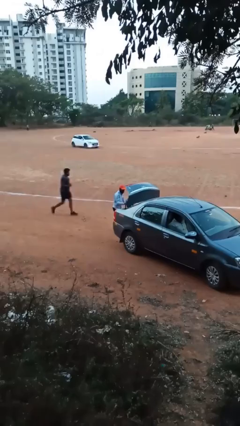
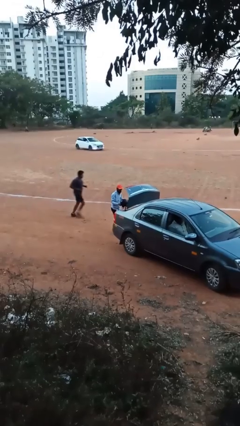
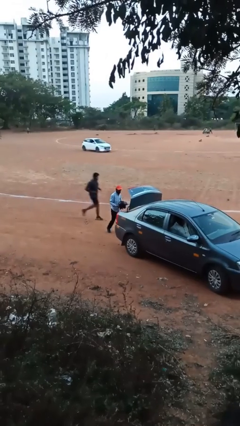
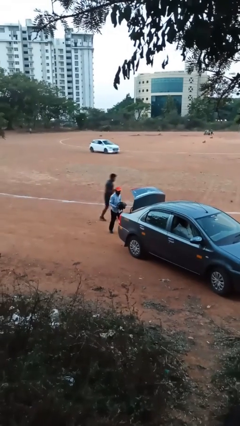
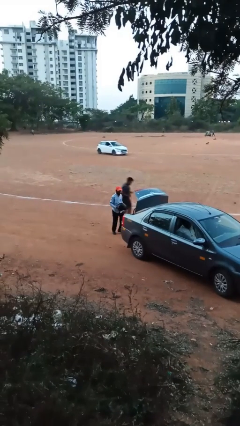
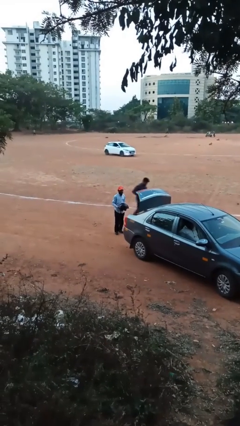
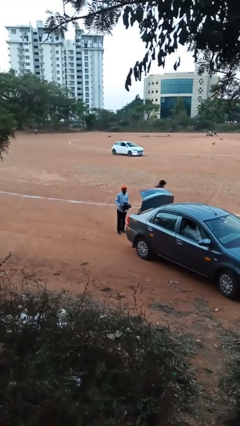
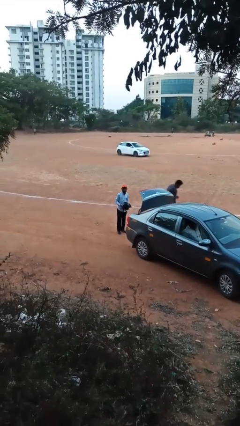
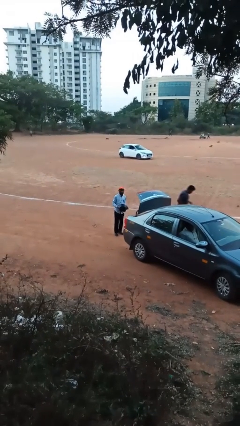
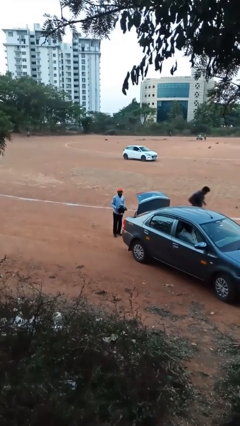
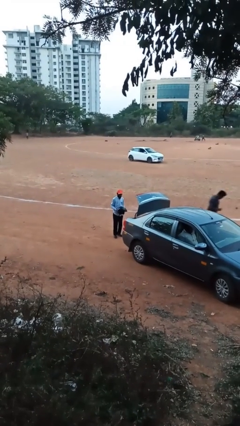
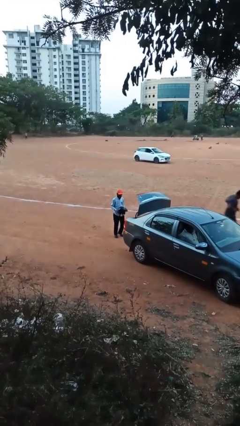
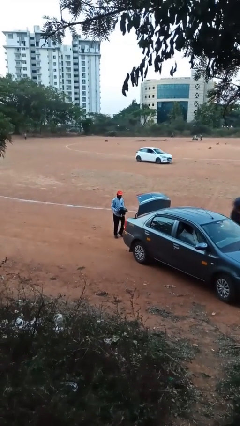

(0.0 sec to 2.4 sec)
person unloads car

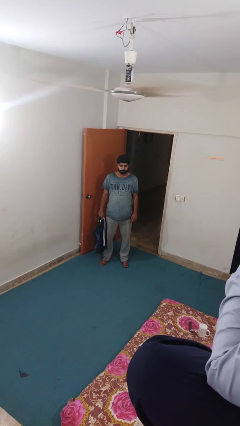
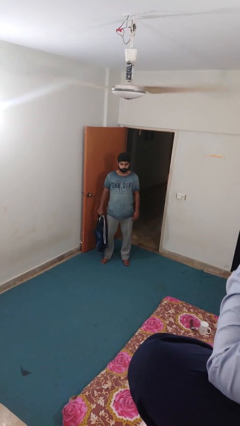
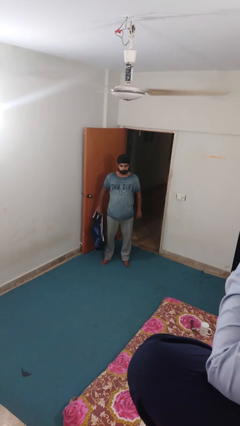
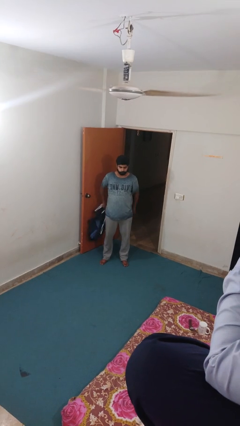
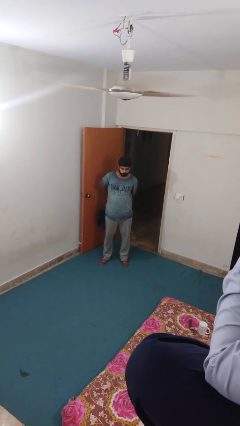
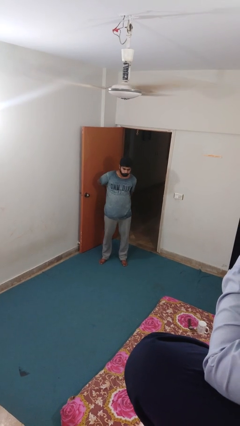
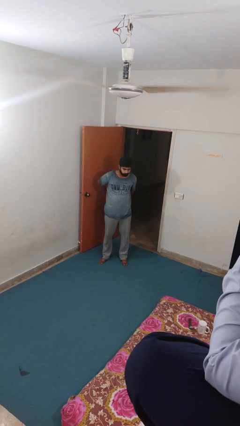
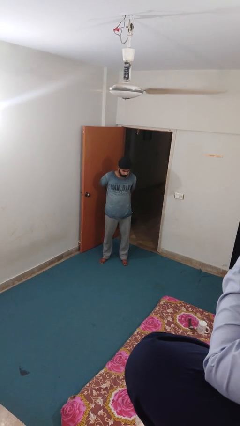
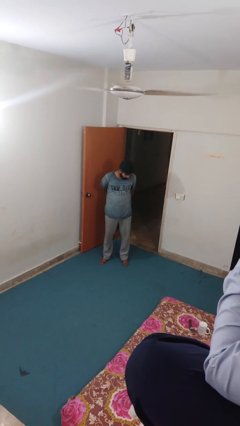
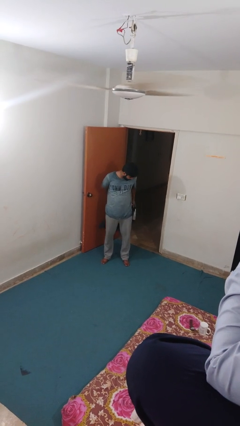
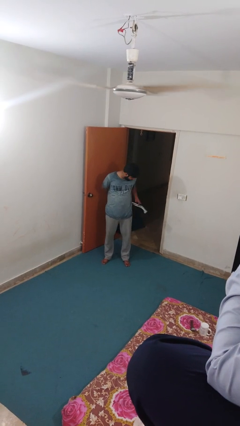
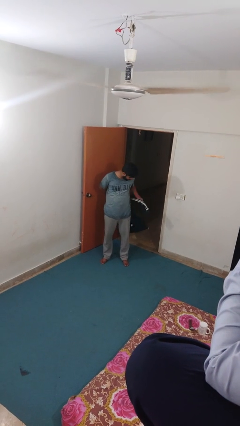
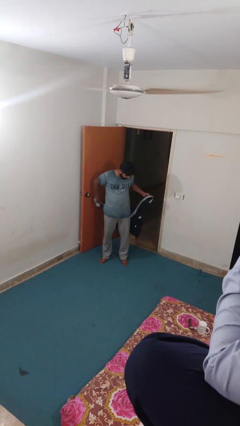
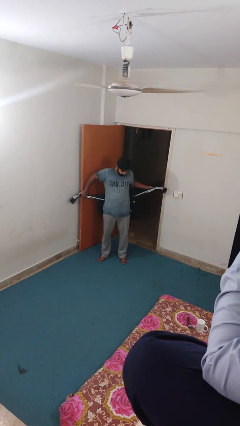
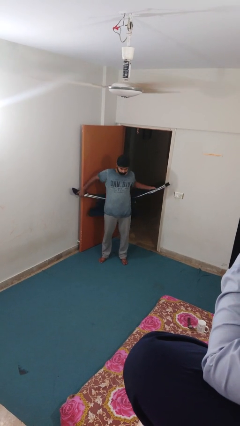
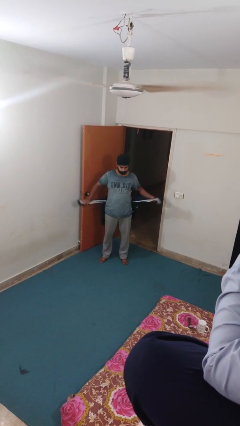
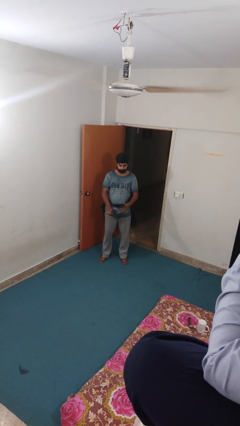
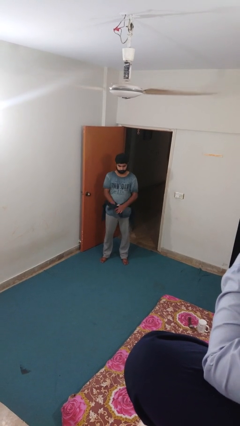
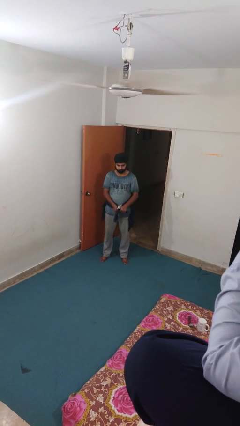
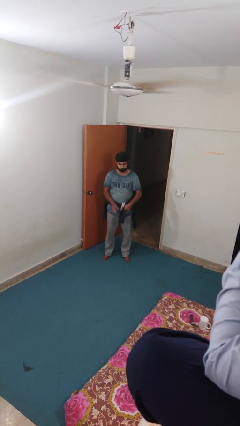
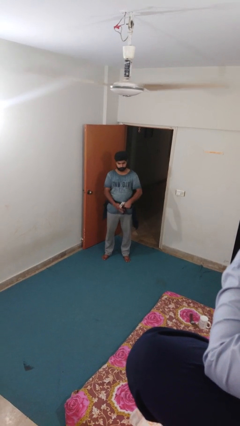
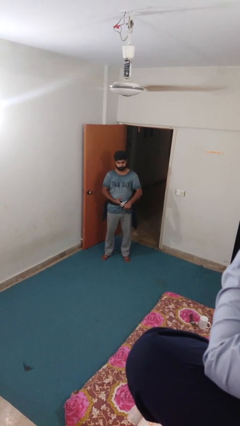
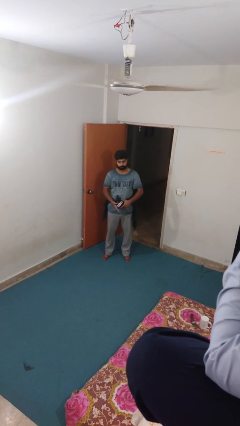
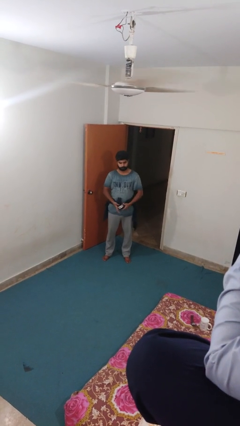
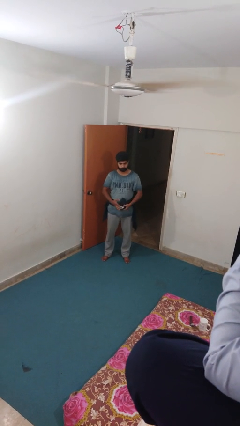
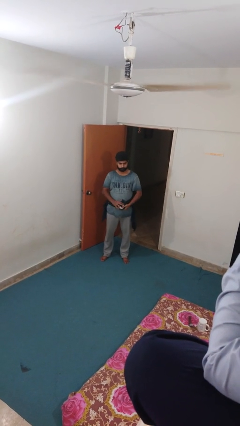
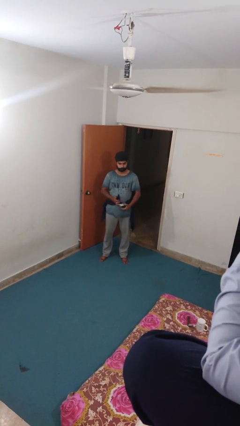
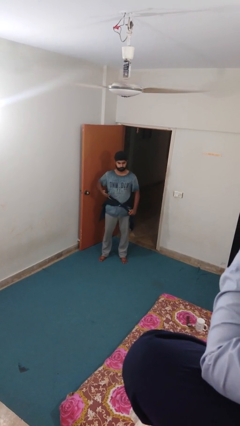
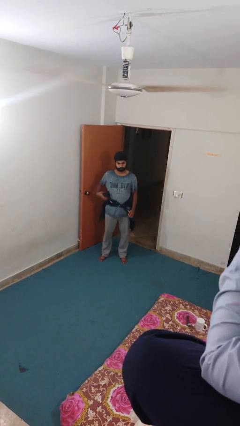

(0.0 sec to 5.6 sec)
person ties jacket around waist

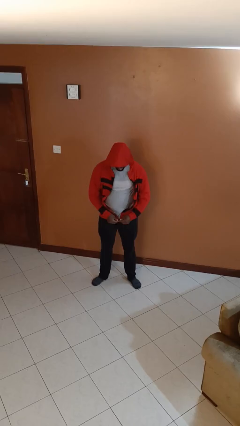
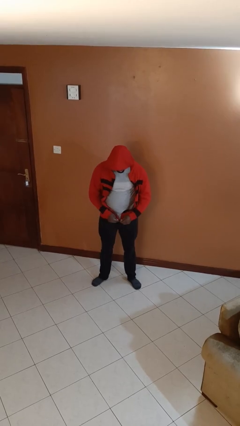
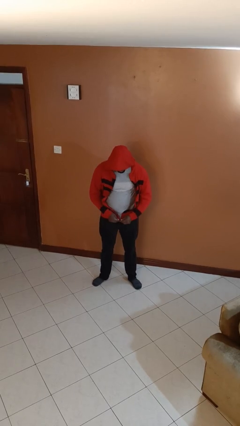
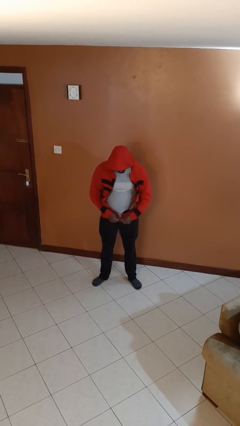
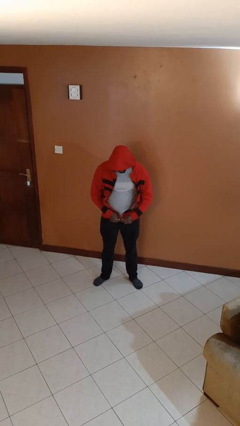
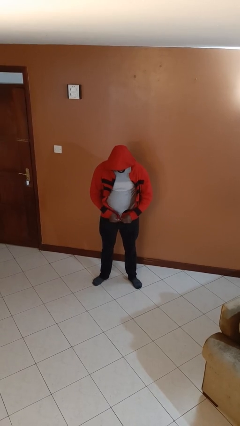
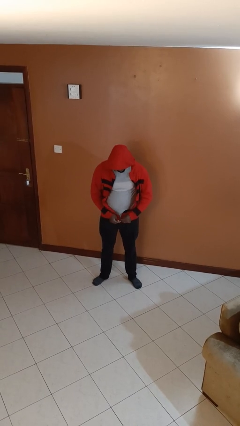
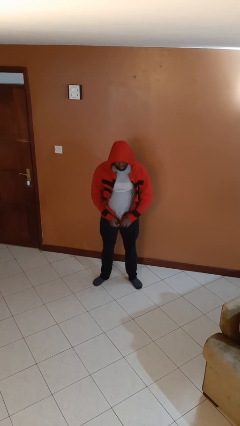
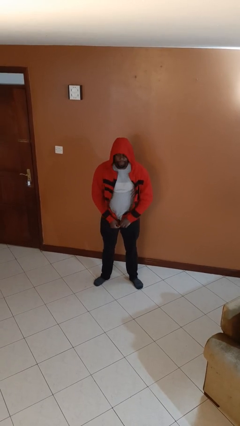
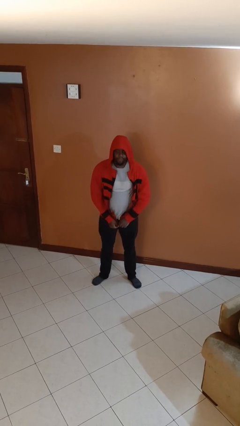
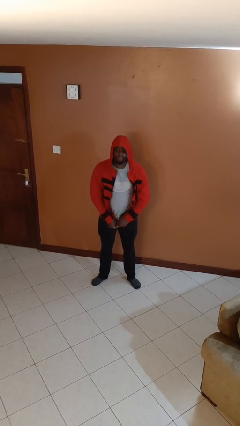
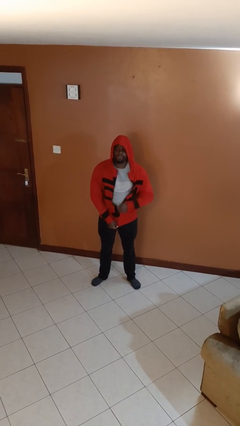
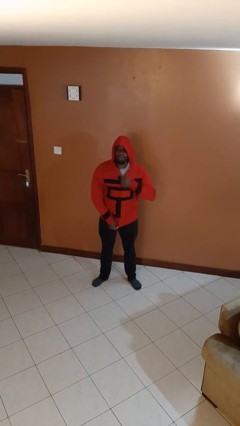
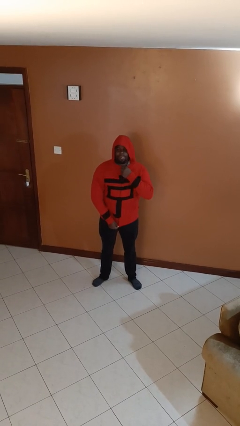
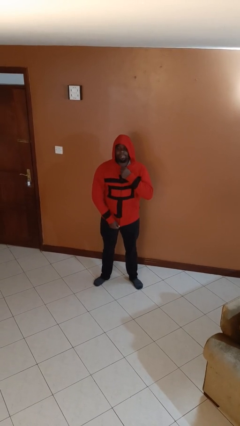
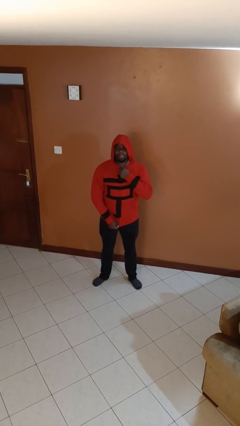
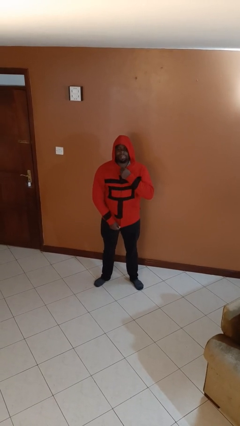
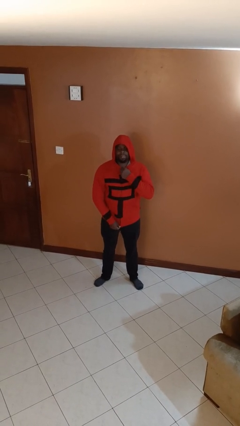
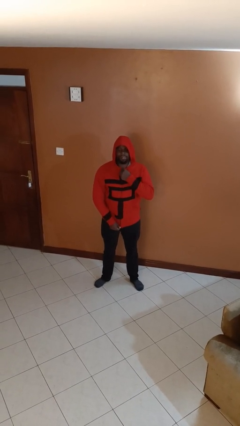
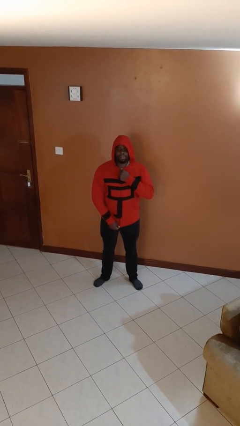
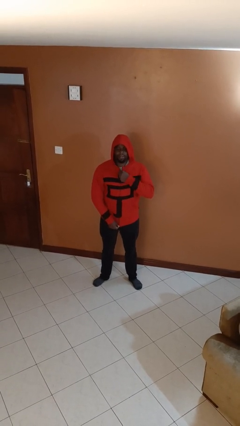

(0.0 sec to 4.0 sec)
person zips up jacket

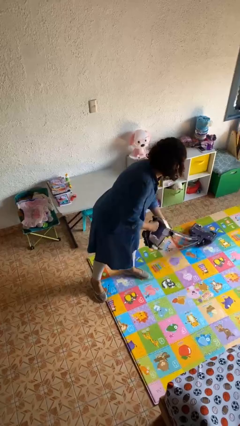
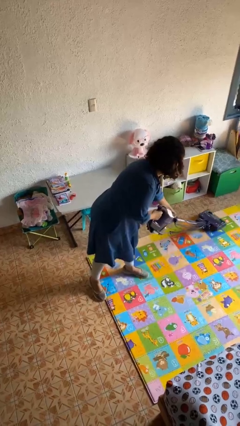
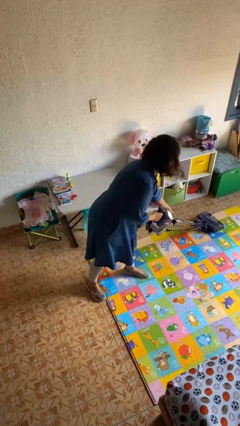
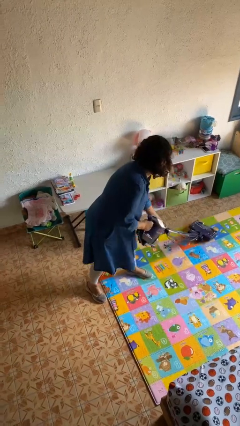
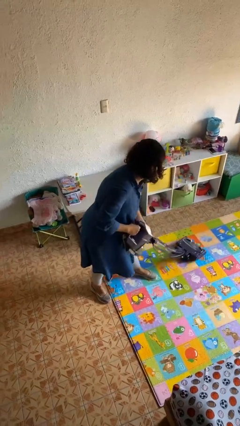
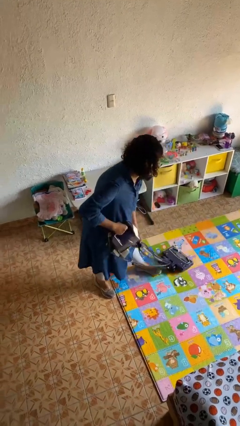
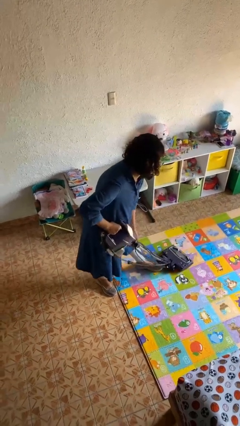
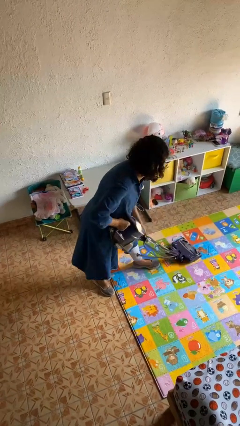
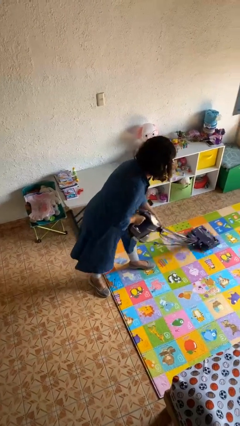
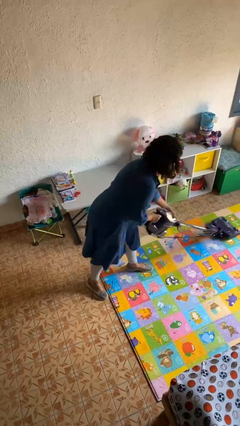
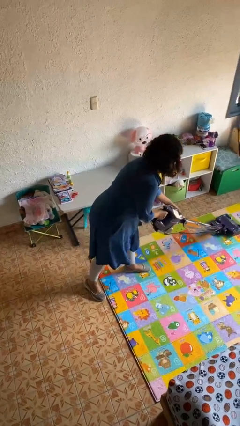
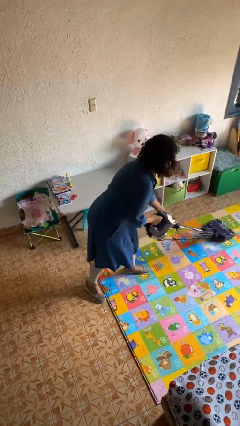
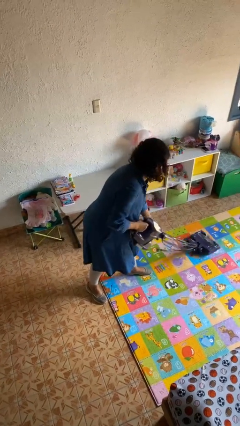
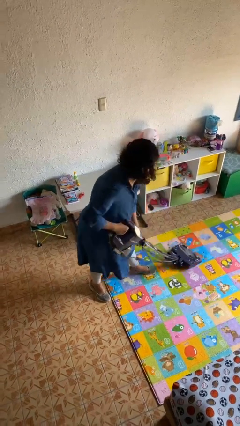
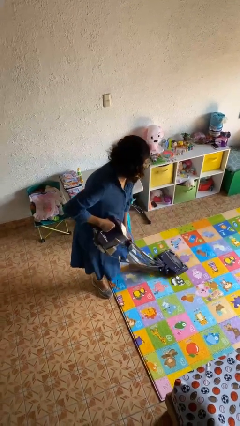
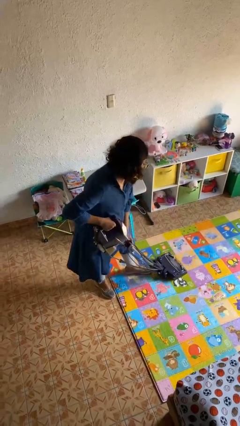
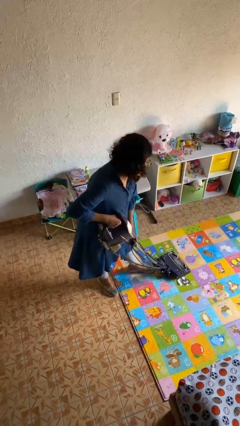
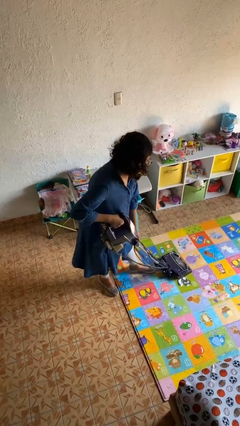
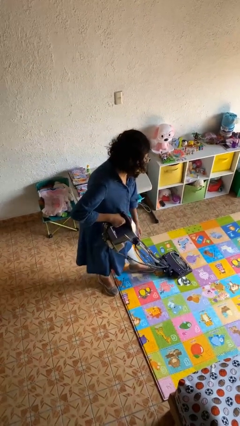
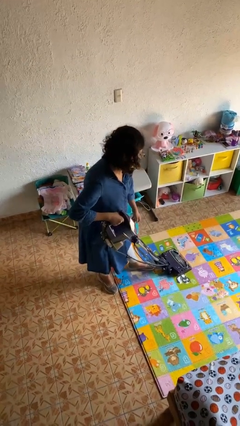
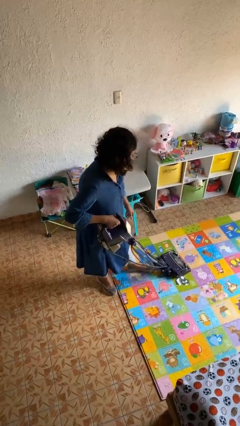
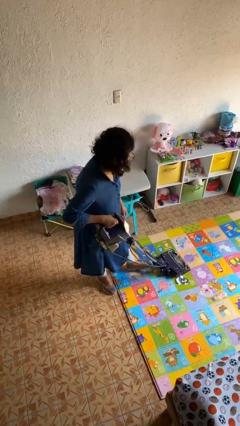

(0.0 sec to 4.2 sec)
person vacuums carpet

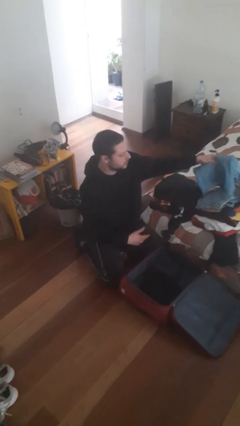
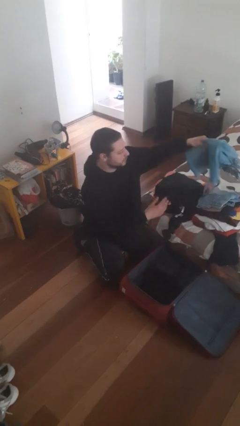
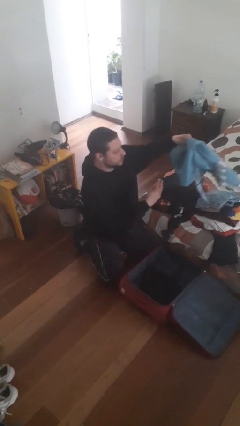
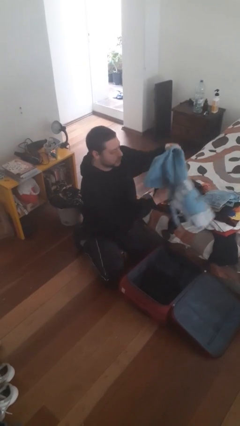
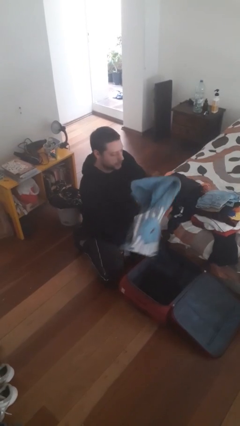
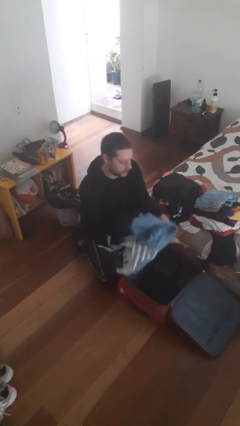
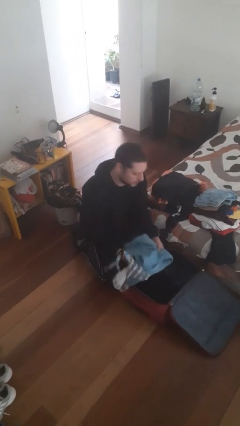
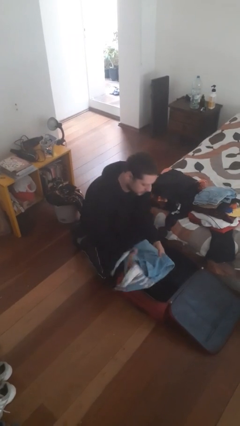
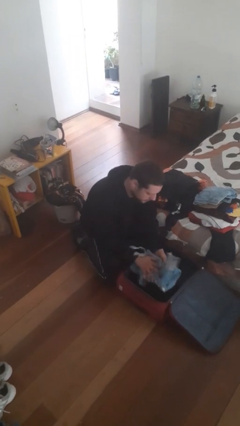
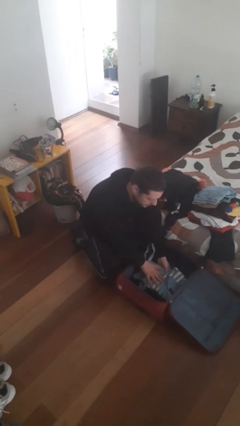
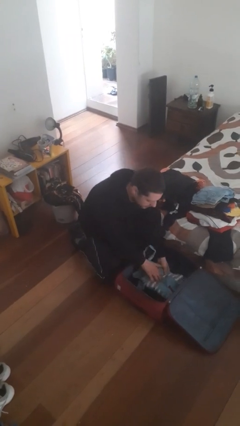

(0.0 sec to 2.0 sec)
person loads clothes into suitcase
